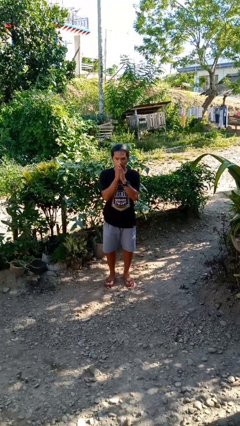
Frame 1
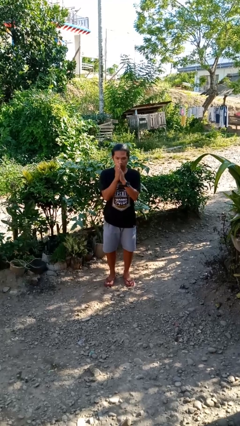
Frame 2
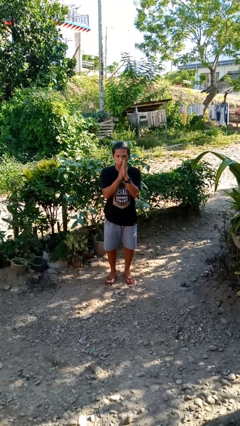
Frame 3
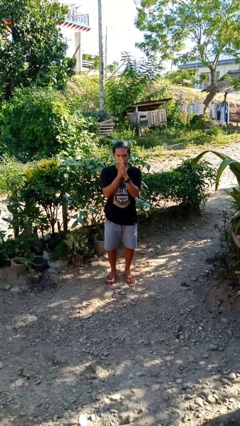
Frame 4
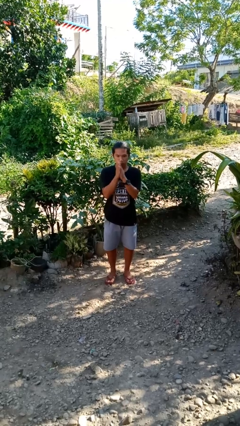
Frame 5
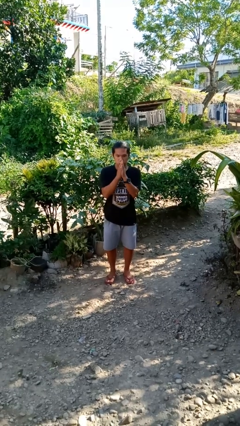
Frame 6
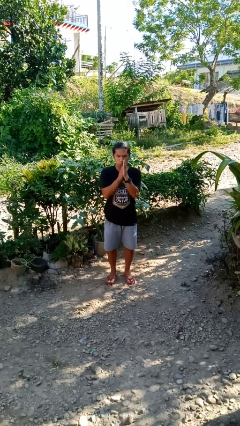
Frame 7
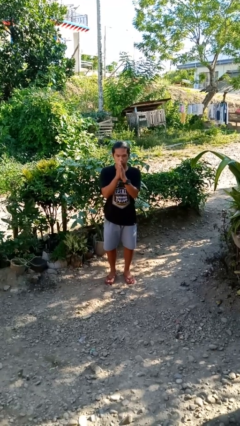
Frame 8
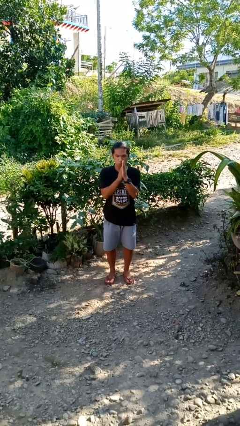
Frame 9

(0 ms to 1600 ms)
person blows into hands

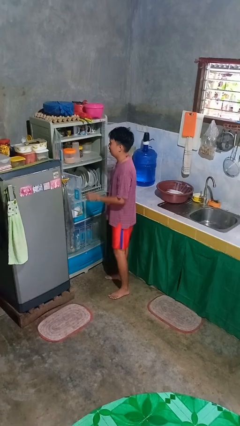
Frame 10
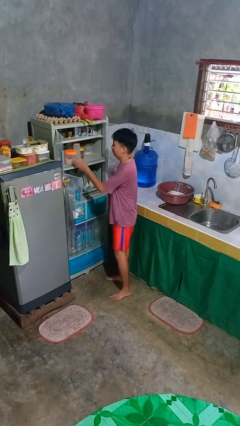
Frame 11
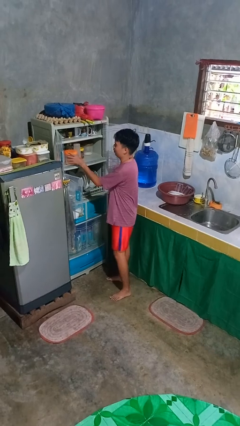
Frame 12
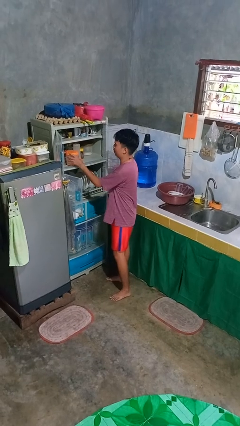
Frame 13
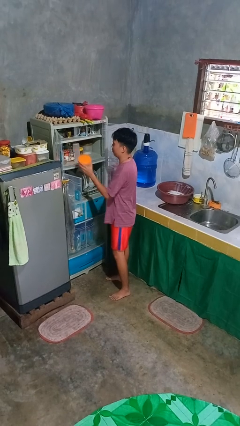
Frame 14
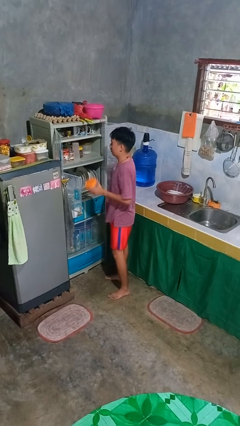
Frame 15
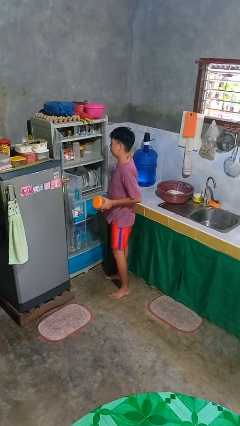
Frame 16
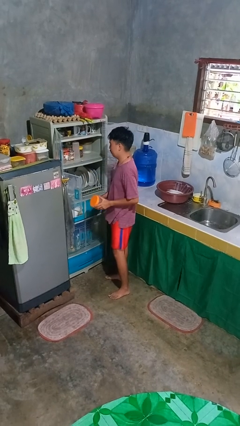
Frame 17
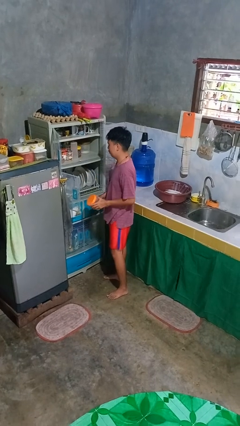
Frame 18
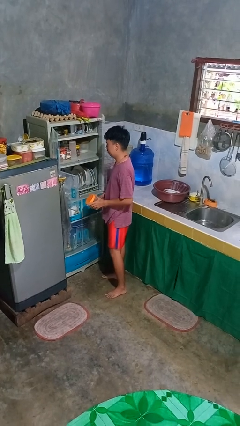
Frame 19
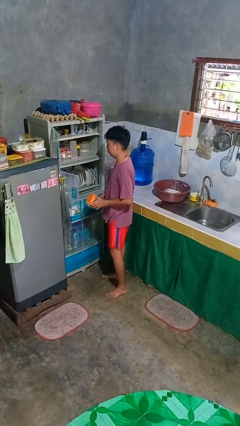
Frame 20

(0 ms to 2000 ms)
person takes object from cabinet

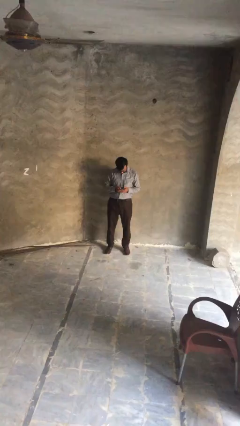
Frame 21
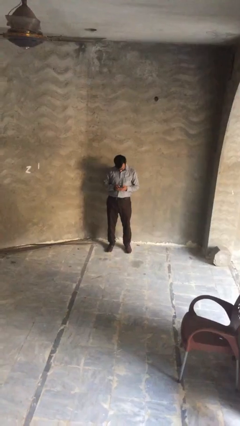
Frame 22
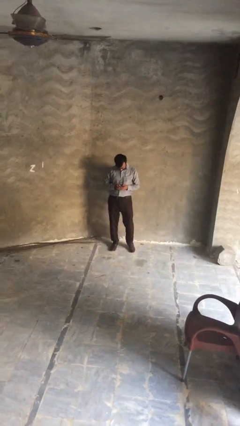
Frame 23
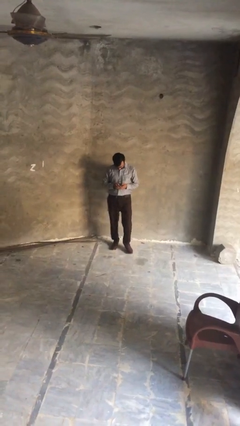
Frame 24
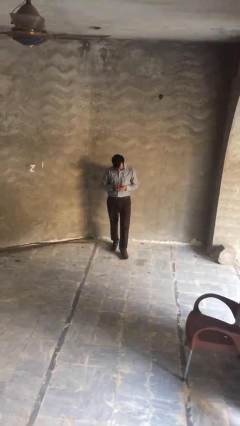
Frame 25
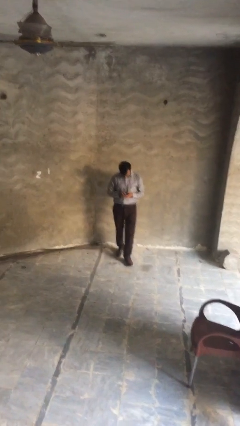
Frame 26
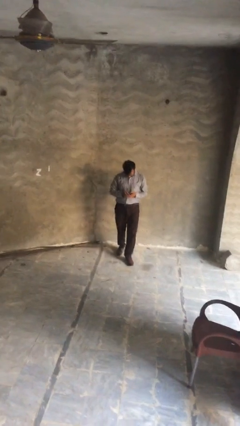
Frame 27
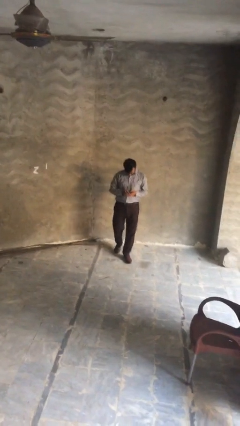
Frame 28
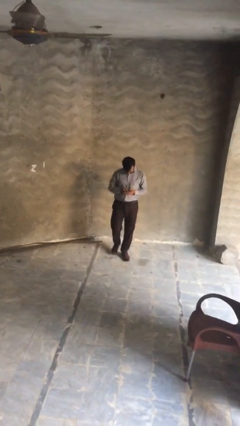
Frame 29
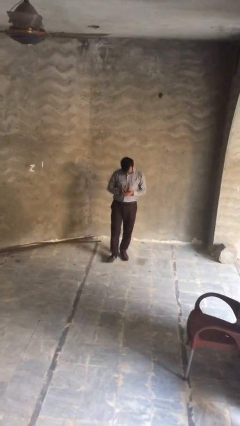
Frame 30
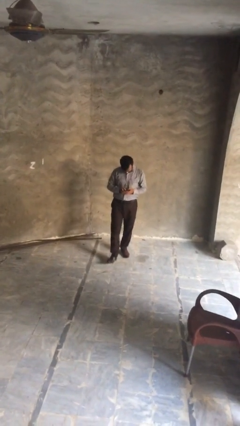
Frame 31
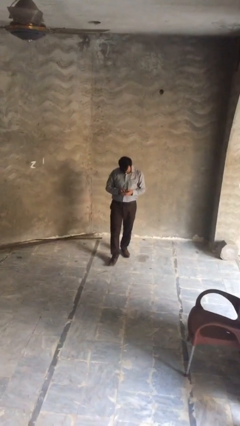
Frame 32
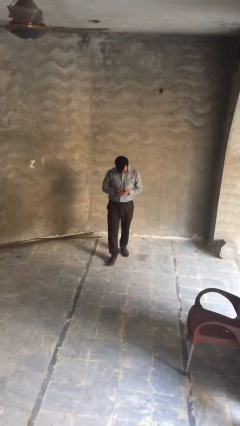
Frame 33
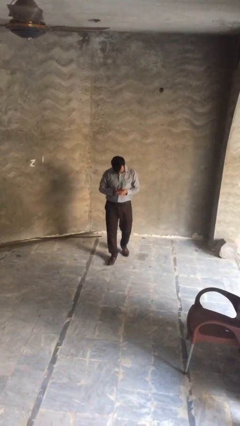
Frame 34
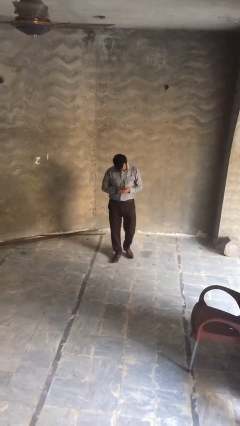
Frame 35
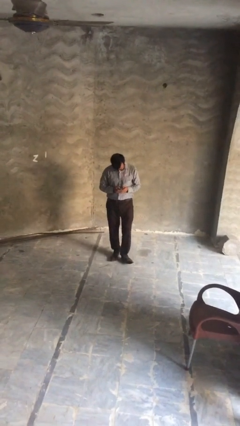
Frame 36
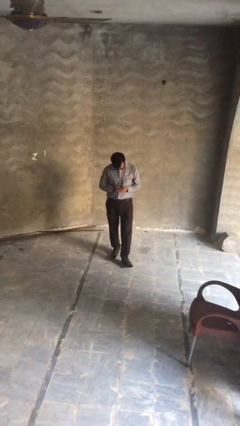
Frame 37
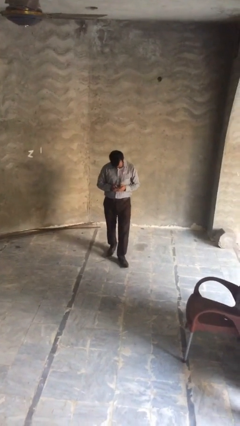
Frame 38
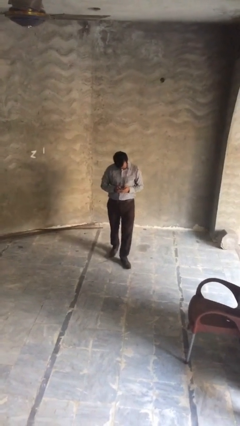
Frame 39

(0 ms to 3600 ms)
person texts on phone

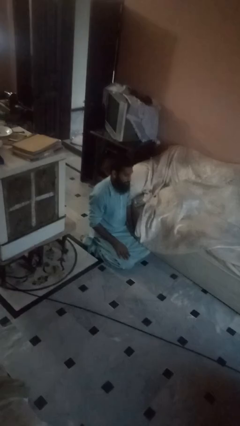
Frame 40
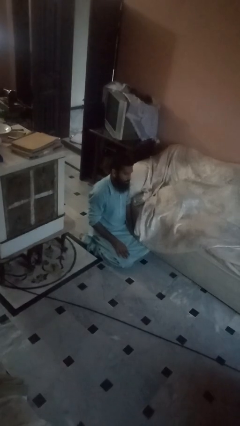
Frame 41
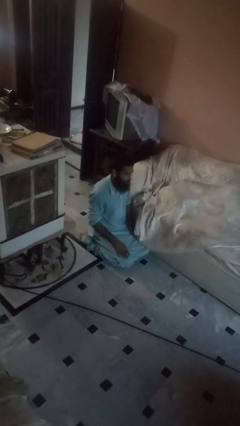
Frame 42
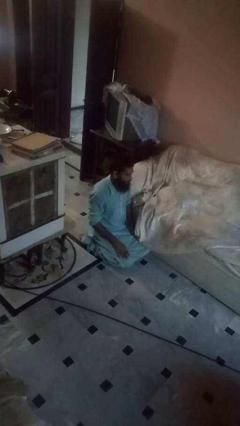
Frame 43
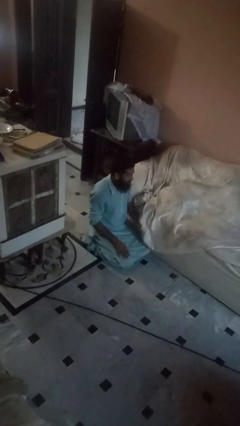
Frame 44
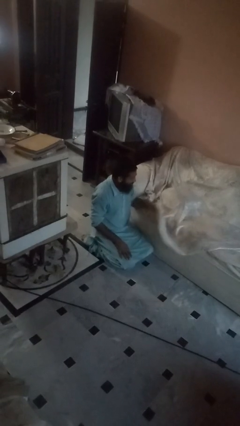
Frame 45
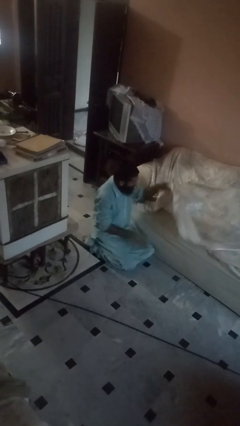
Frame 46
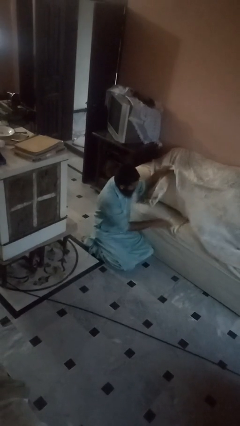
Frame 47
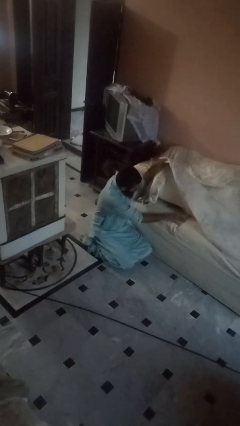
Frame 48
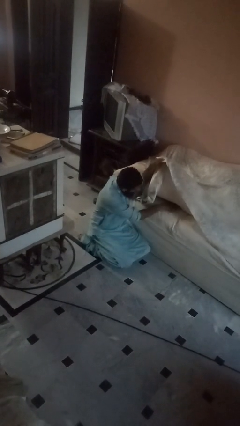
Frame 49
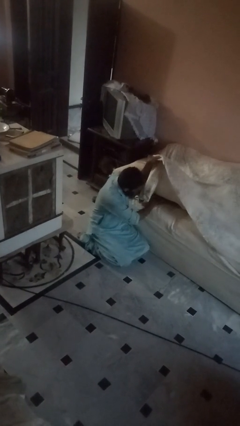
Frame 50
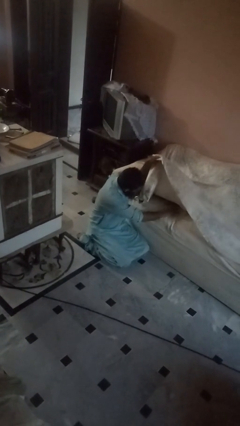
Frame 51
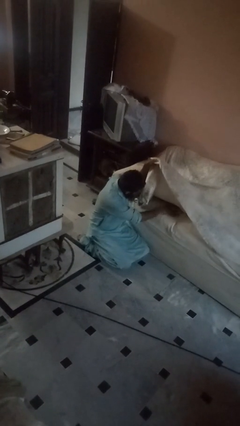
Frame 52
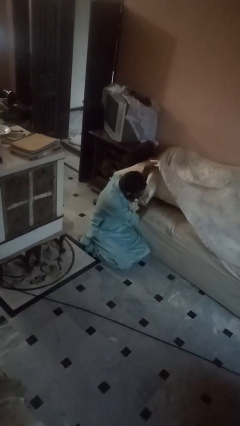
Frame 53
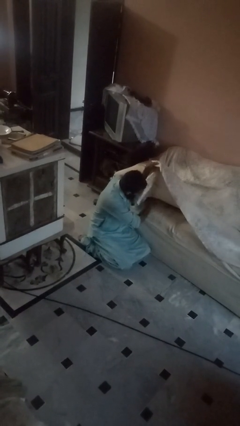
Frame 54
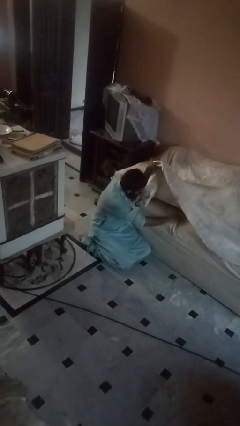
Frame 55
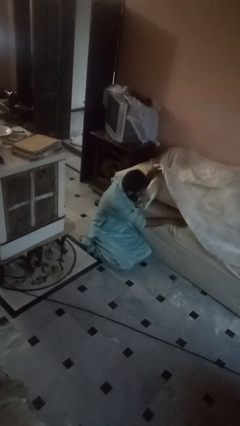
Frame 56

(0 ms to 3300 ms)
person searches in couch

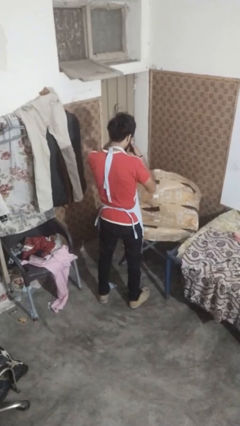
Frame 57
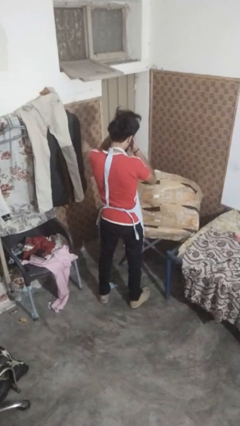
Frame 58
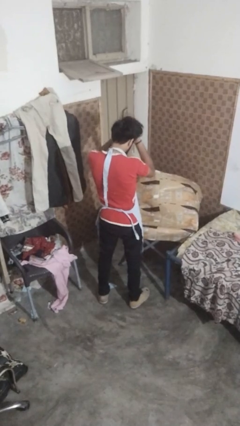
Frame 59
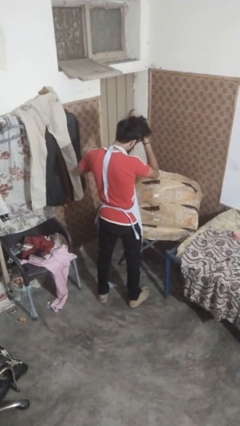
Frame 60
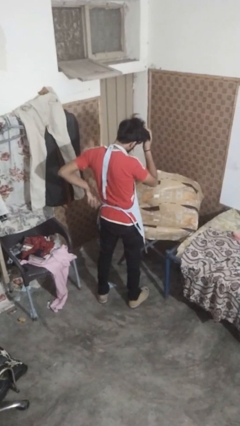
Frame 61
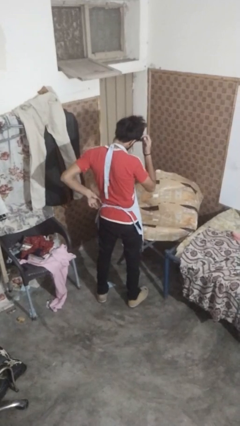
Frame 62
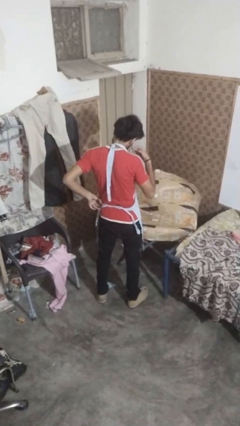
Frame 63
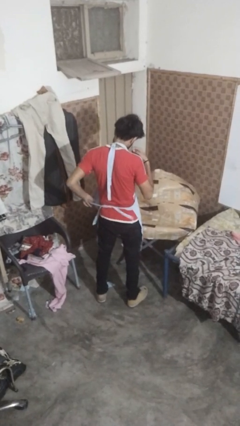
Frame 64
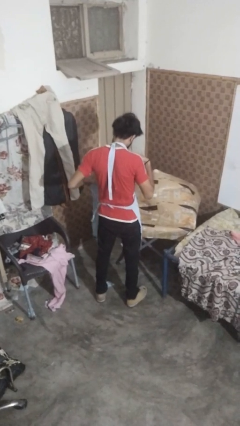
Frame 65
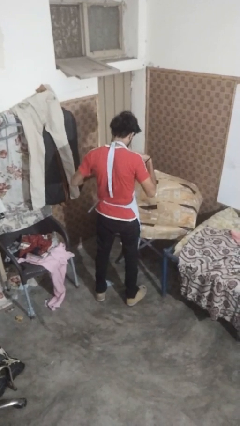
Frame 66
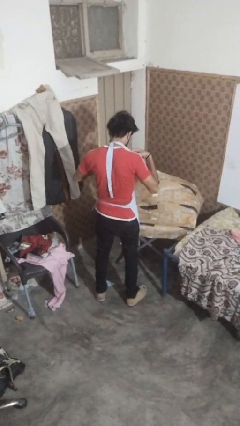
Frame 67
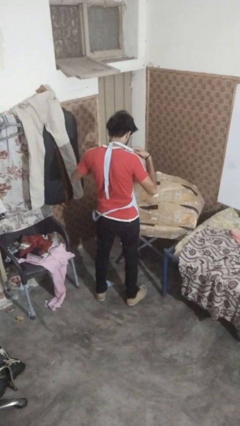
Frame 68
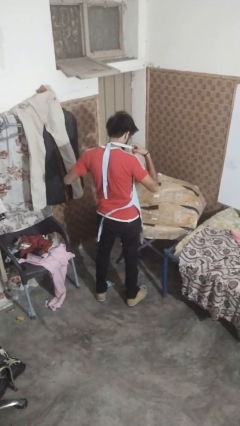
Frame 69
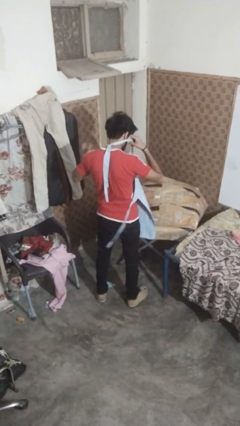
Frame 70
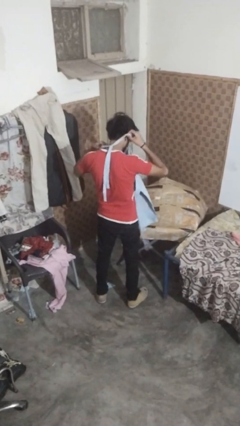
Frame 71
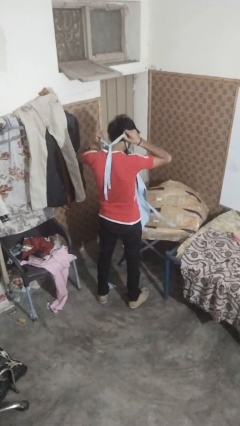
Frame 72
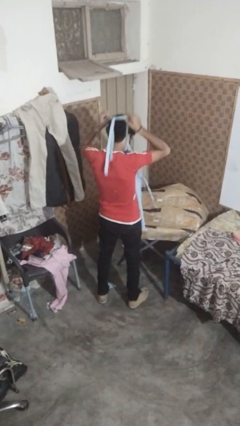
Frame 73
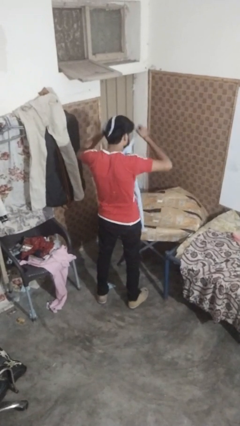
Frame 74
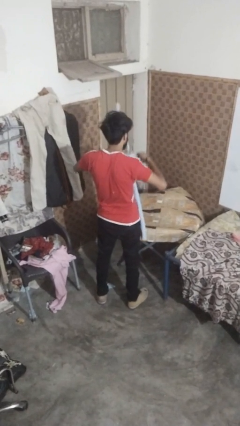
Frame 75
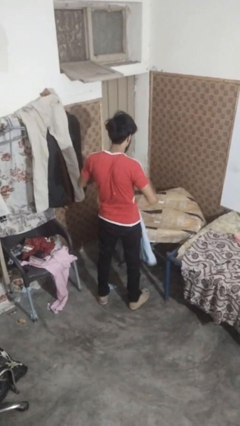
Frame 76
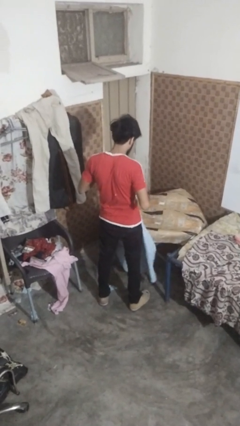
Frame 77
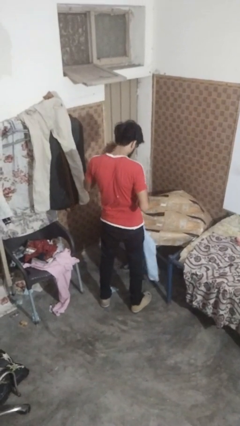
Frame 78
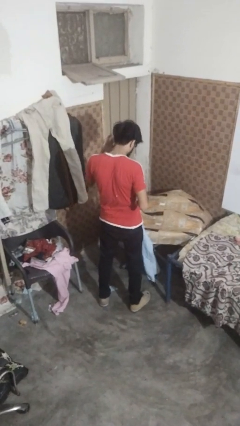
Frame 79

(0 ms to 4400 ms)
person takes off apron

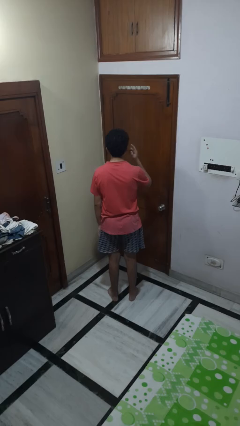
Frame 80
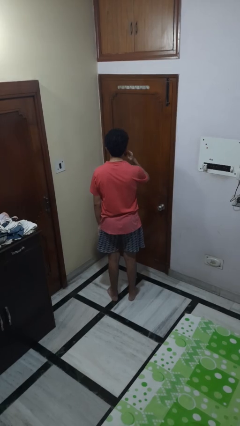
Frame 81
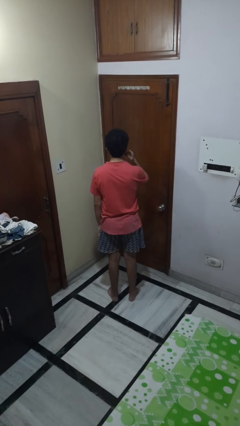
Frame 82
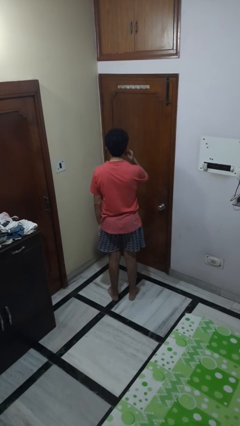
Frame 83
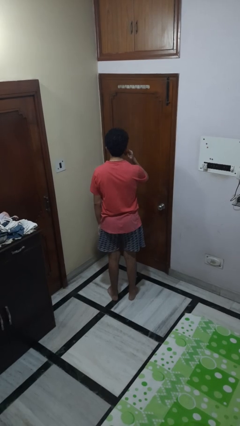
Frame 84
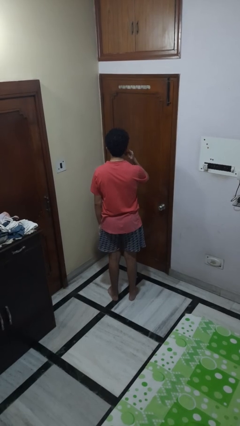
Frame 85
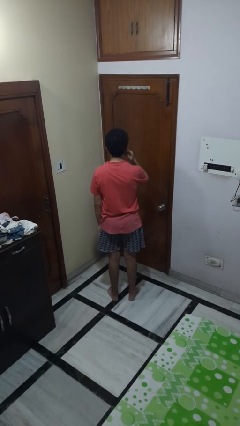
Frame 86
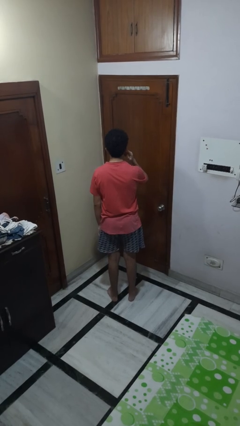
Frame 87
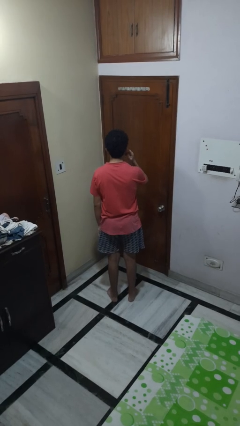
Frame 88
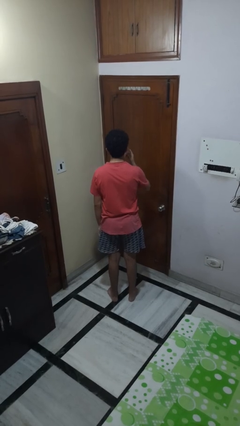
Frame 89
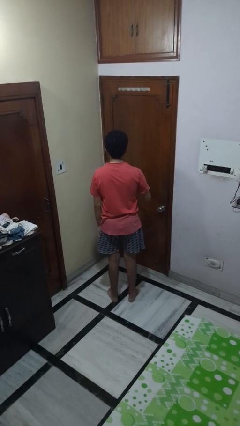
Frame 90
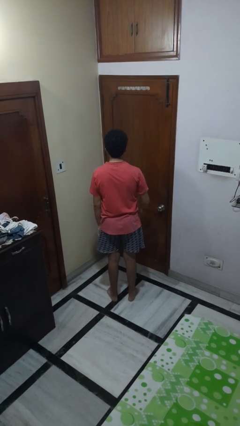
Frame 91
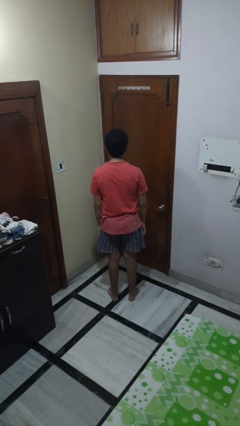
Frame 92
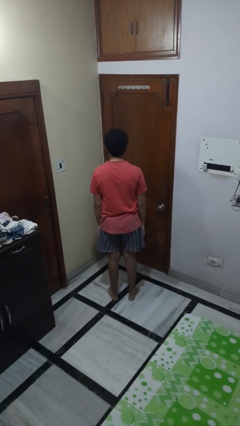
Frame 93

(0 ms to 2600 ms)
person gestures listen closely
